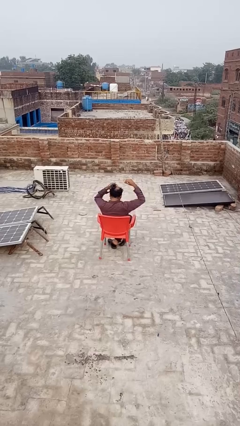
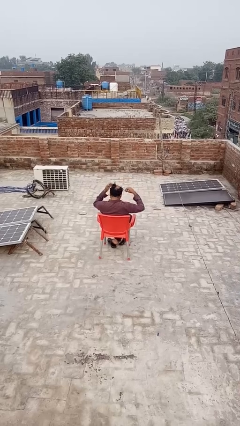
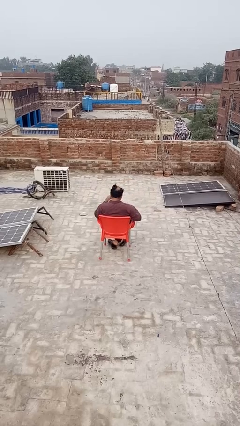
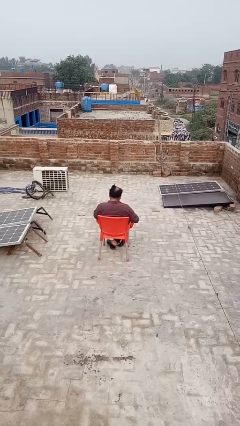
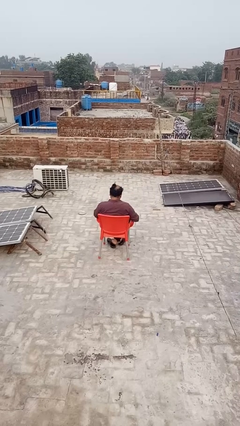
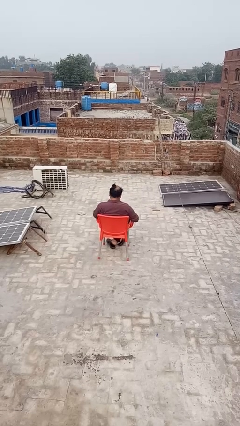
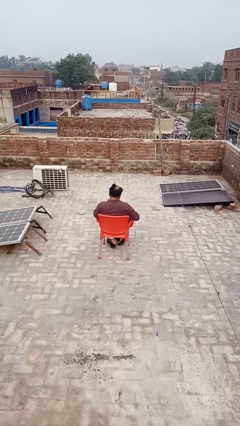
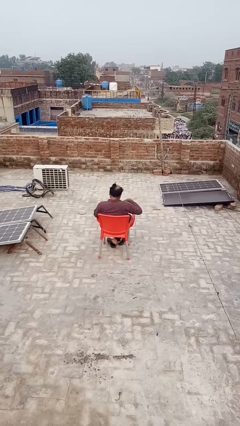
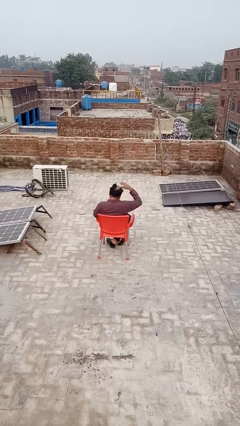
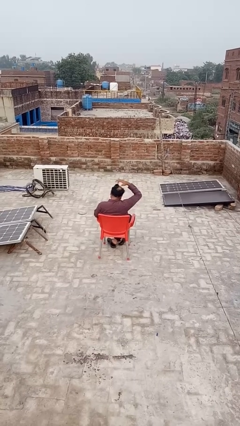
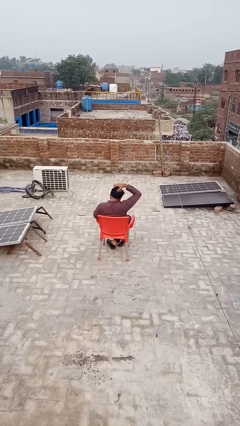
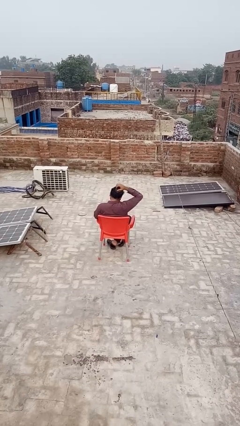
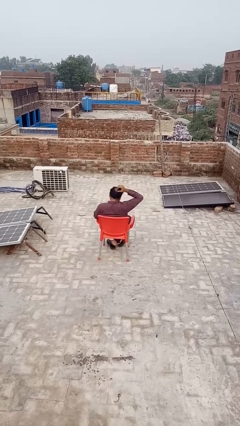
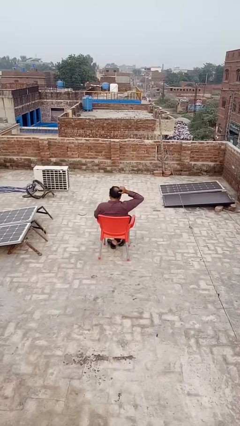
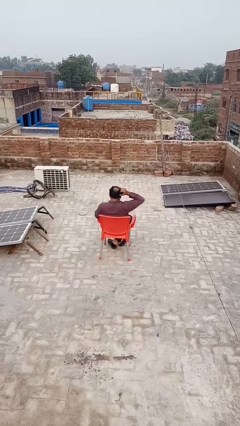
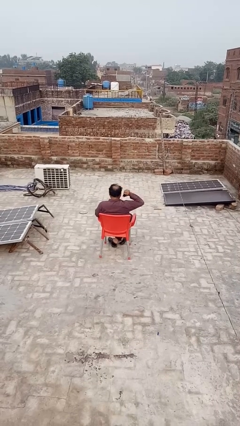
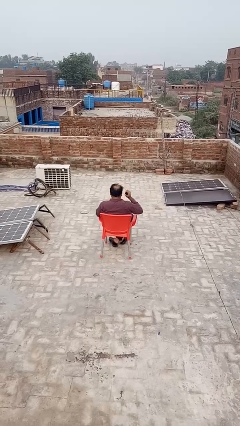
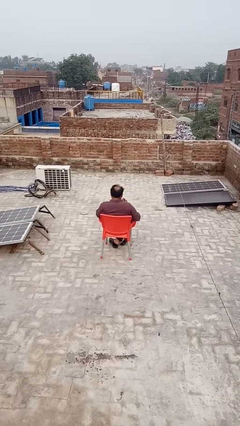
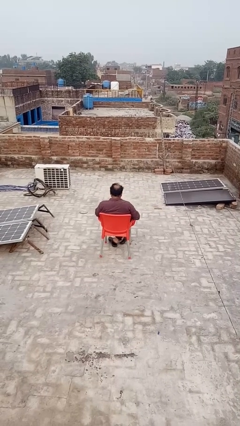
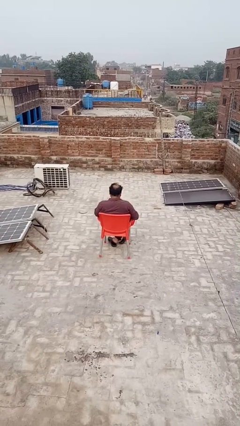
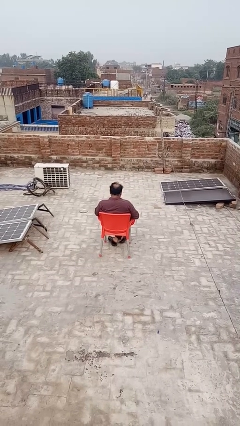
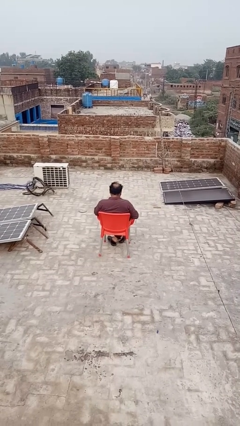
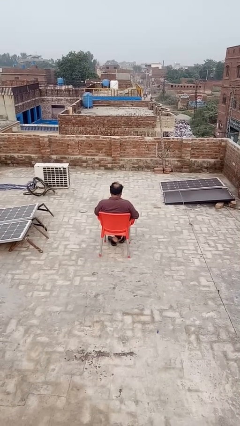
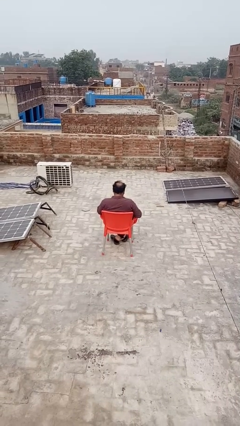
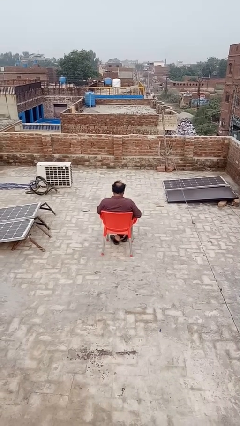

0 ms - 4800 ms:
person takes off hairtie

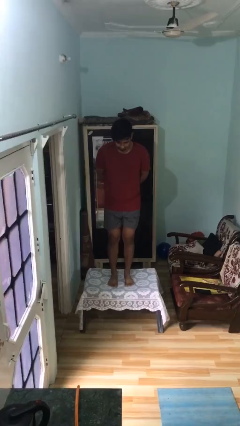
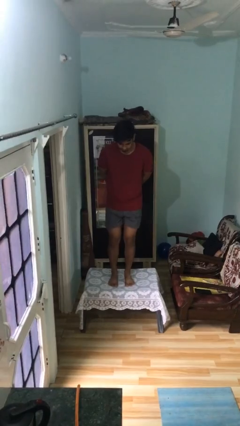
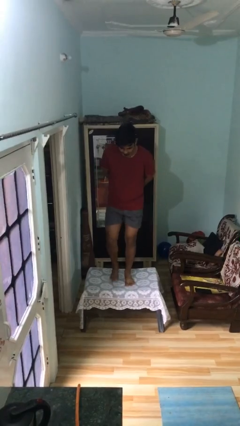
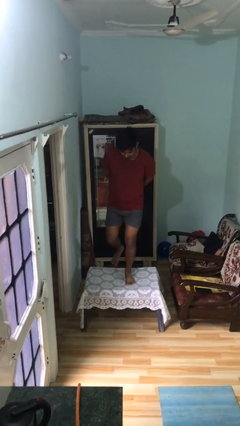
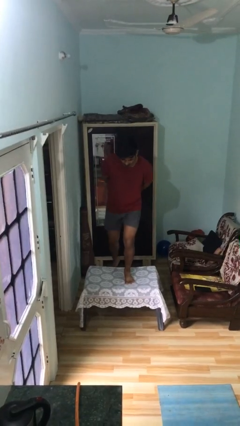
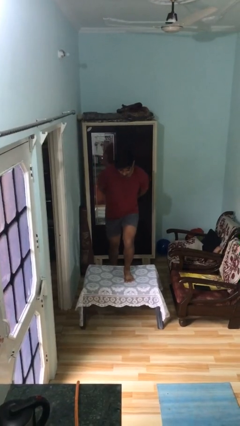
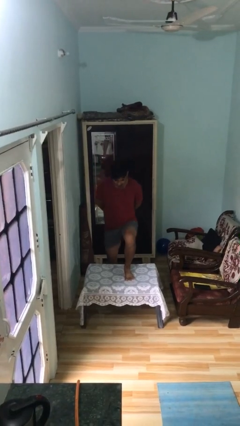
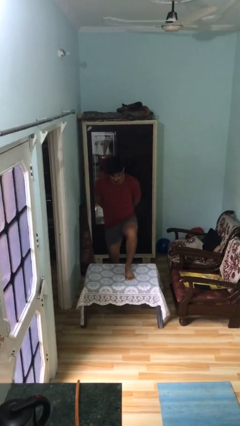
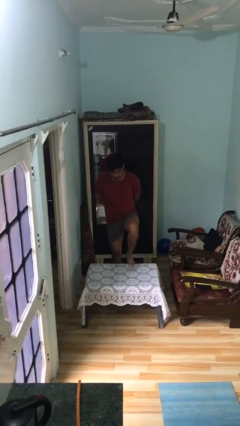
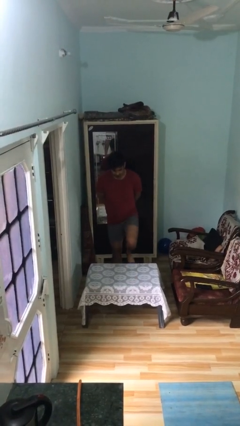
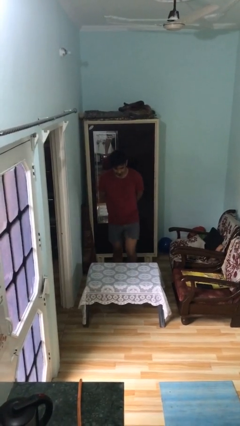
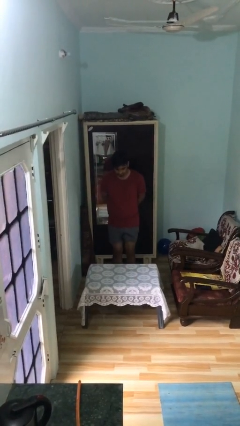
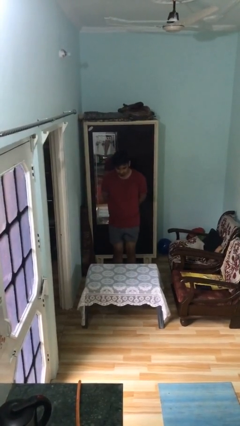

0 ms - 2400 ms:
person climbs off table

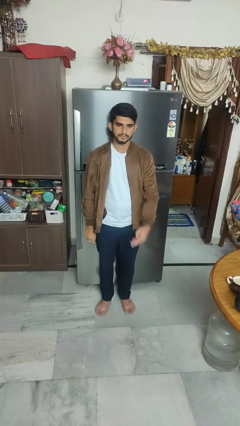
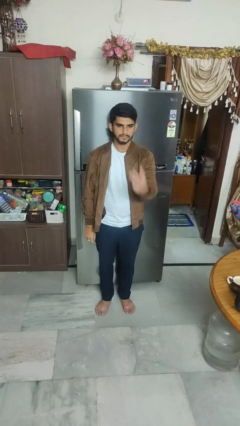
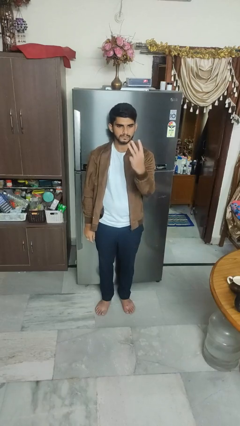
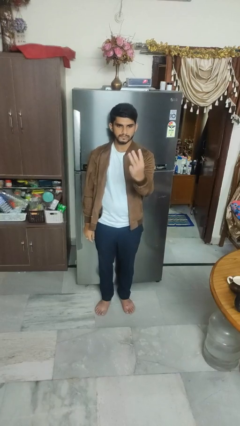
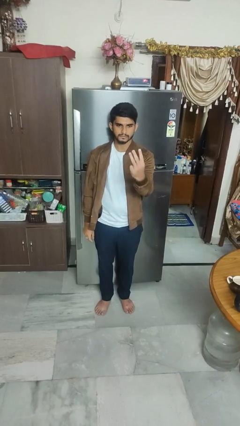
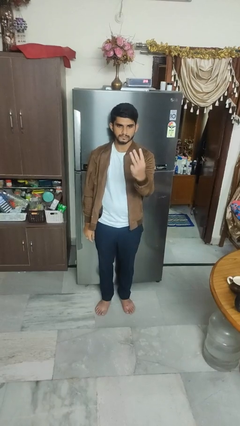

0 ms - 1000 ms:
person gestures number three

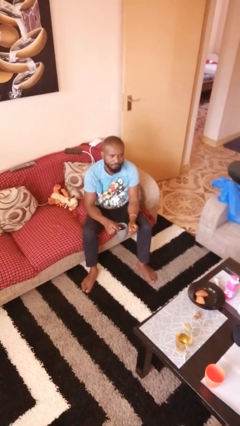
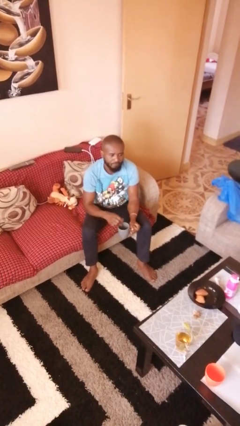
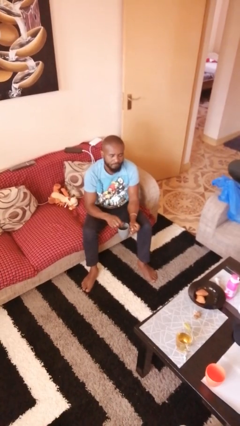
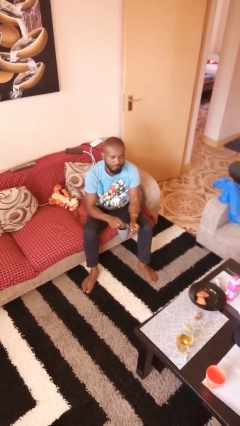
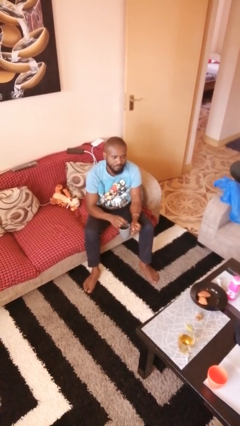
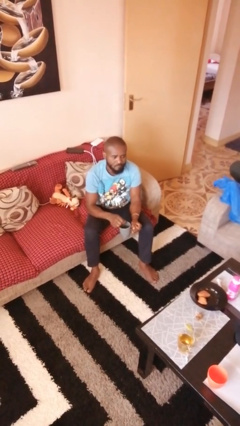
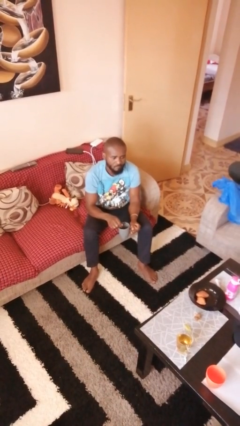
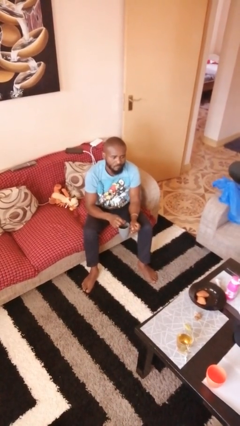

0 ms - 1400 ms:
person stirs mug

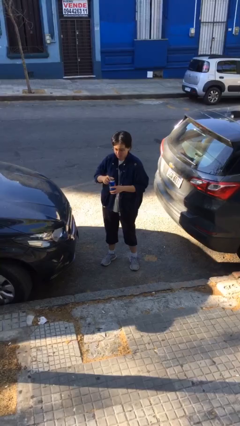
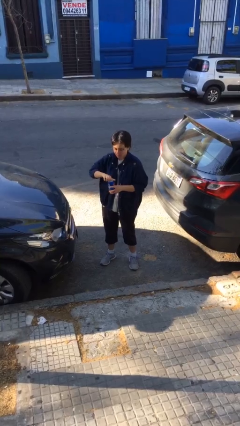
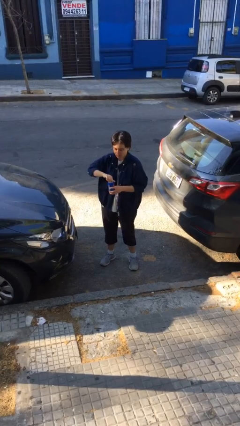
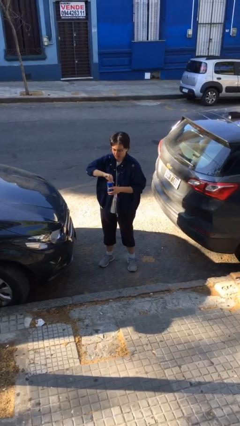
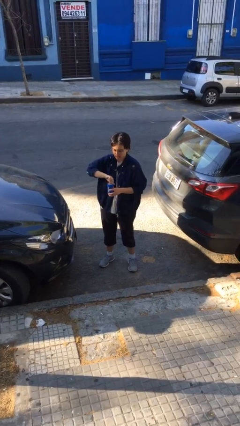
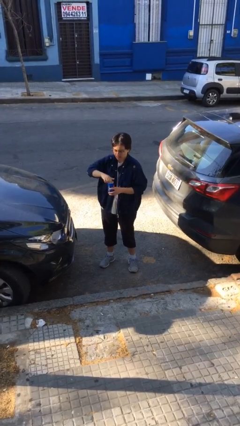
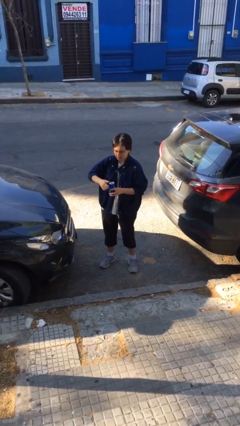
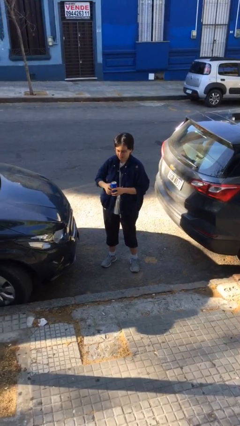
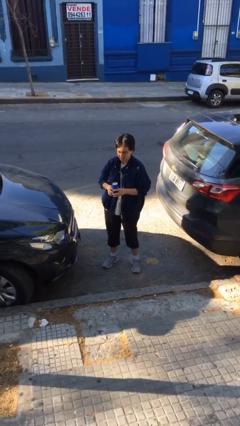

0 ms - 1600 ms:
person opens beverage can

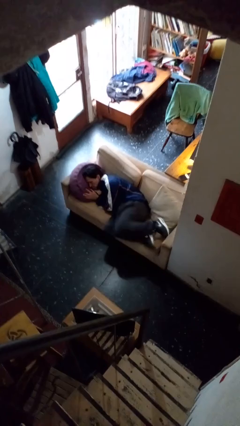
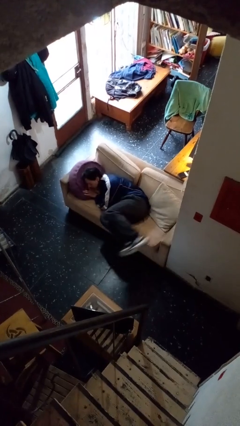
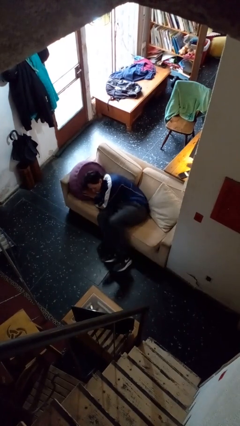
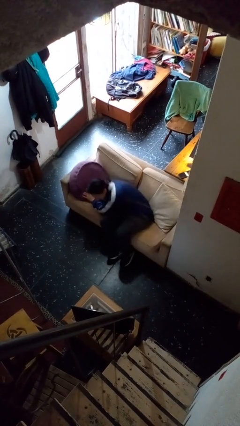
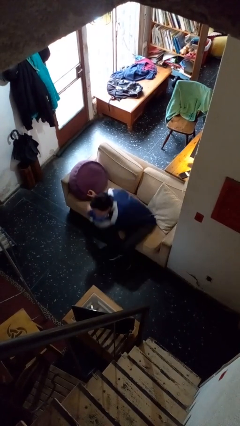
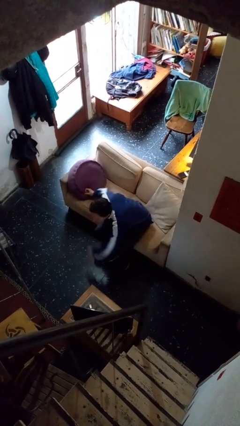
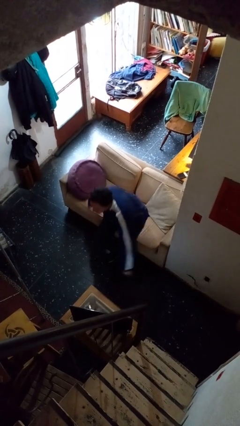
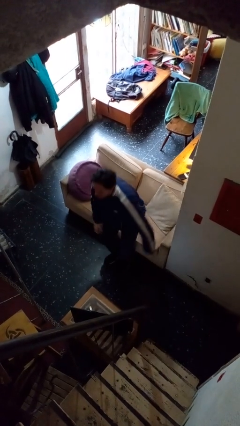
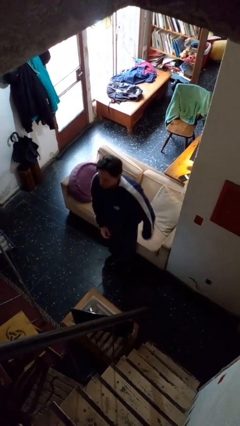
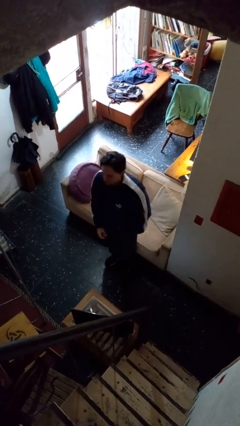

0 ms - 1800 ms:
person stands up

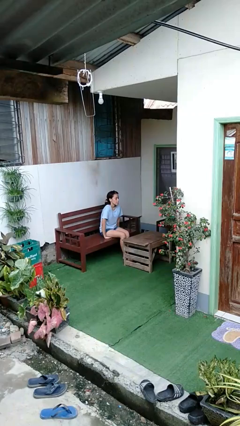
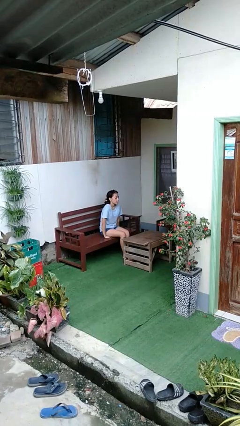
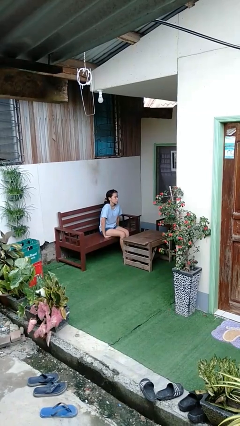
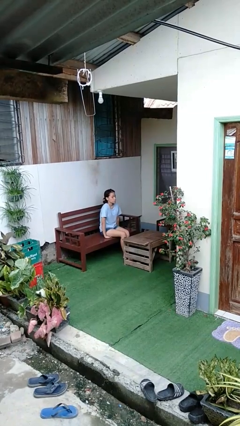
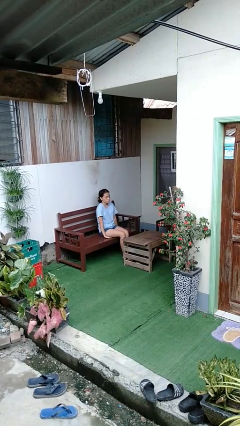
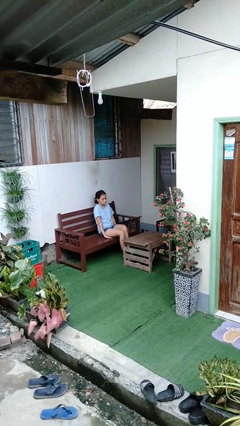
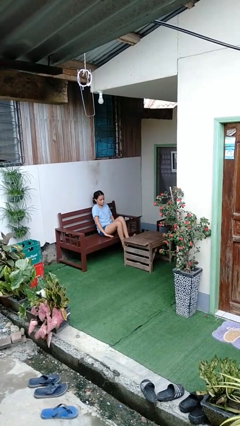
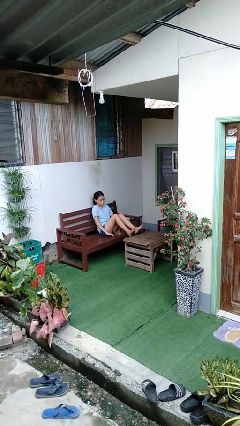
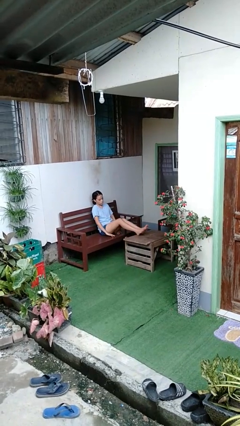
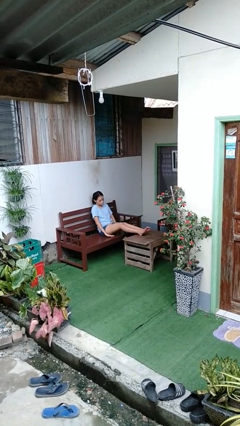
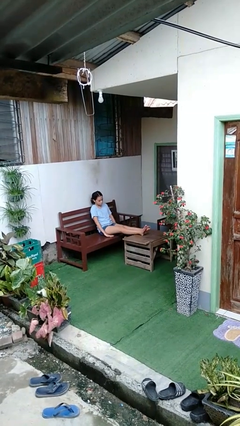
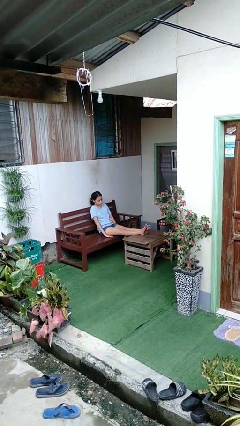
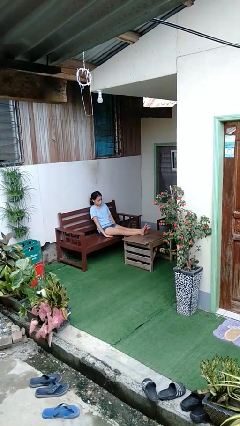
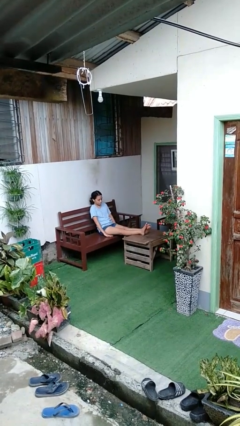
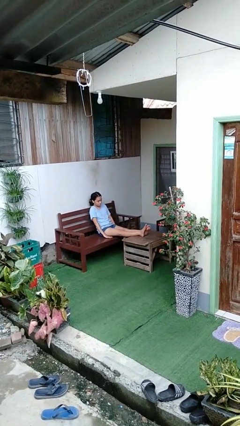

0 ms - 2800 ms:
person puts feet up

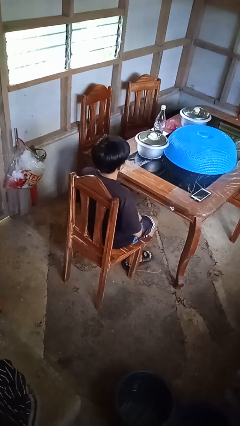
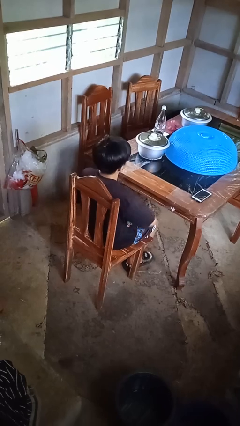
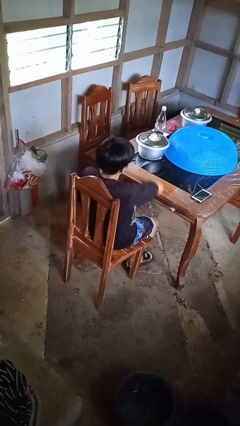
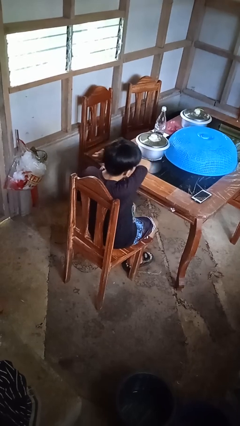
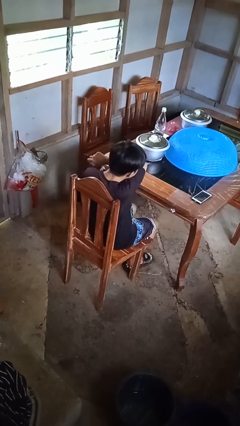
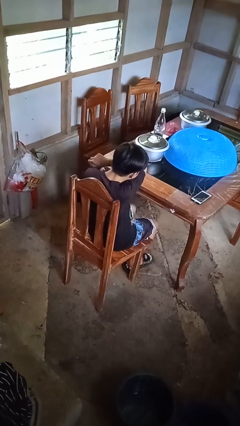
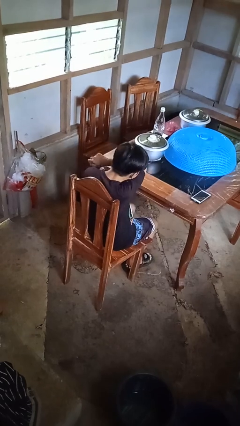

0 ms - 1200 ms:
person sneezes into arm
